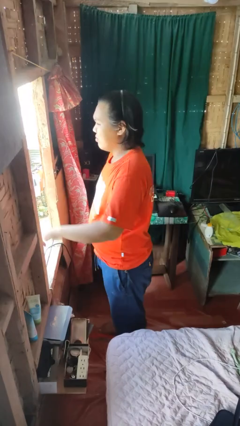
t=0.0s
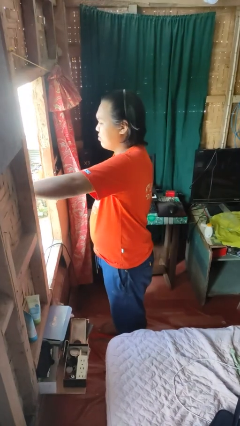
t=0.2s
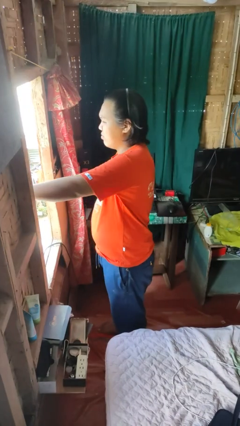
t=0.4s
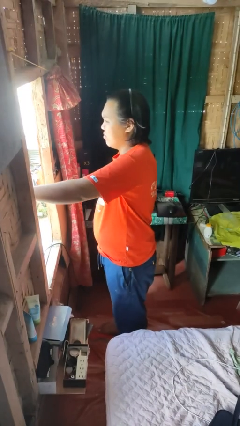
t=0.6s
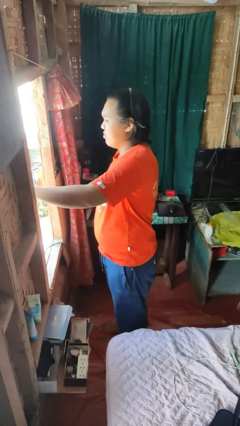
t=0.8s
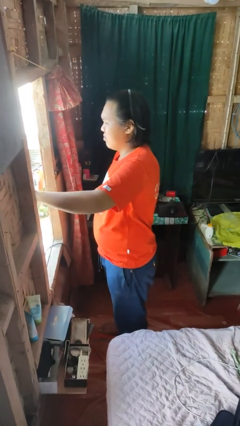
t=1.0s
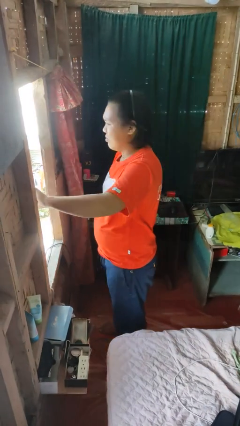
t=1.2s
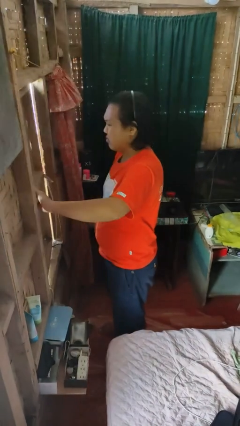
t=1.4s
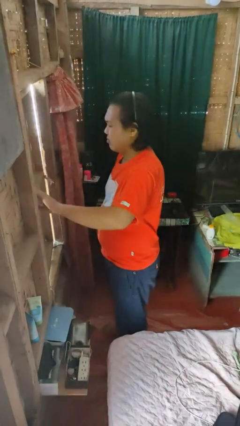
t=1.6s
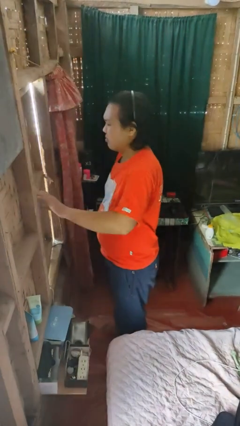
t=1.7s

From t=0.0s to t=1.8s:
person closes home window

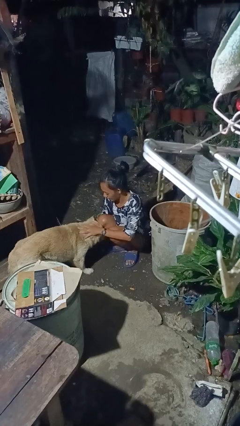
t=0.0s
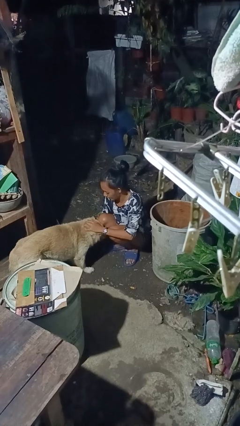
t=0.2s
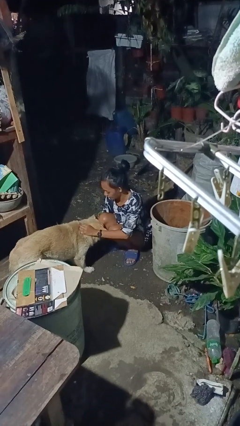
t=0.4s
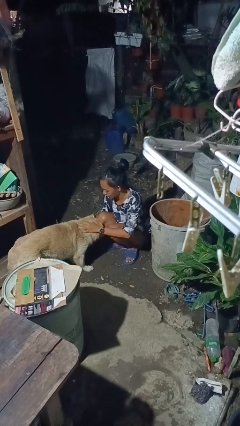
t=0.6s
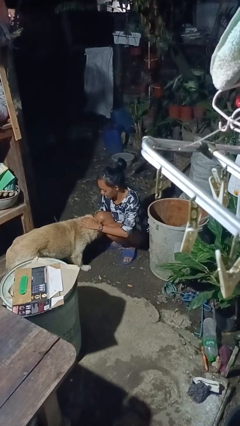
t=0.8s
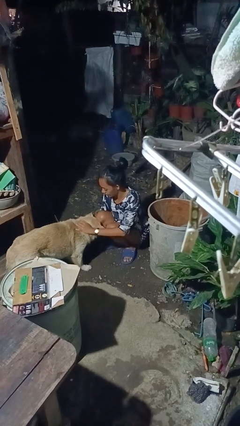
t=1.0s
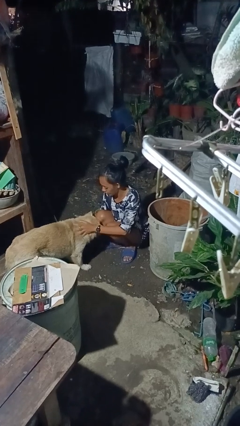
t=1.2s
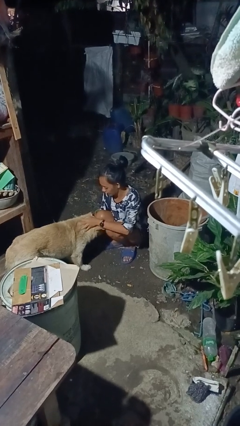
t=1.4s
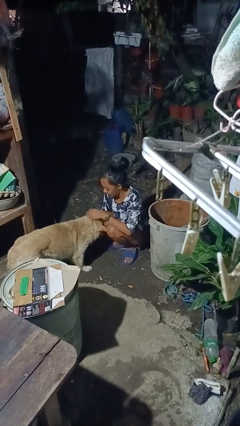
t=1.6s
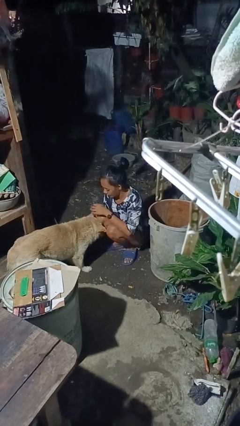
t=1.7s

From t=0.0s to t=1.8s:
person pets dog

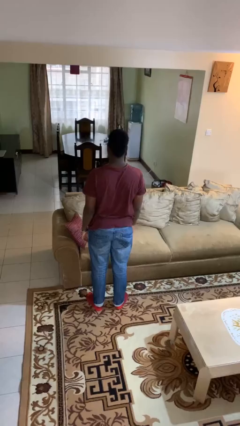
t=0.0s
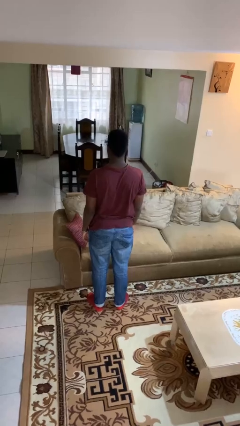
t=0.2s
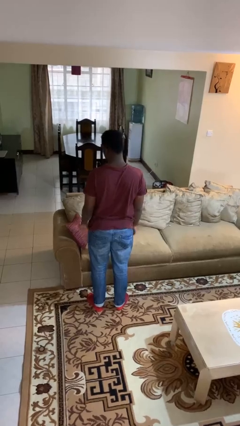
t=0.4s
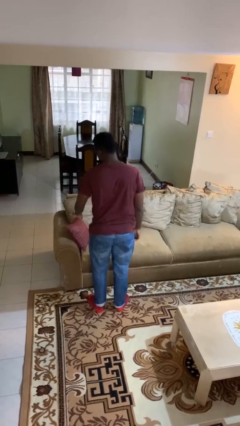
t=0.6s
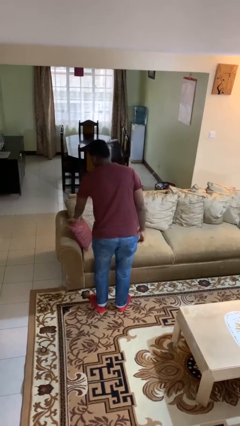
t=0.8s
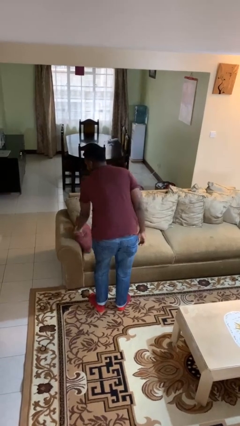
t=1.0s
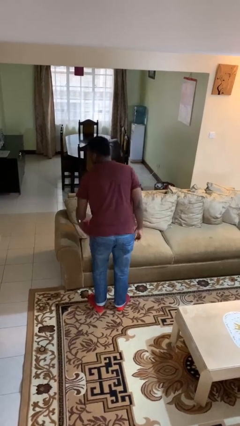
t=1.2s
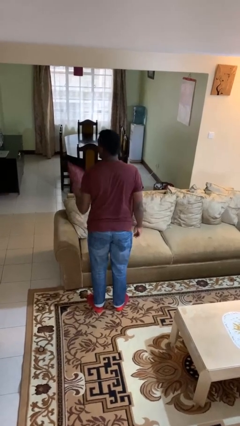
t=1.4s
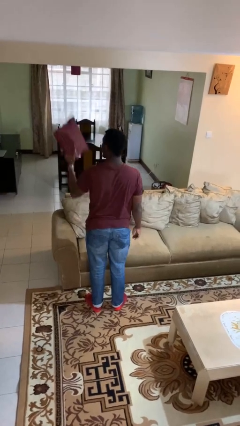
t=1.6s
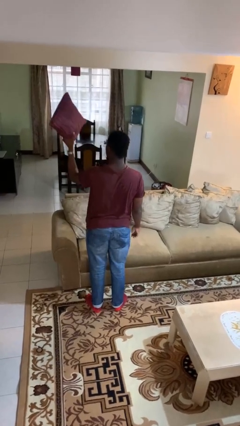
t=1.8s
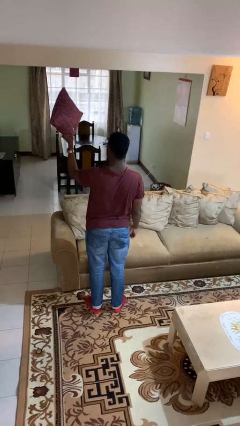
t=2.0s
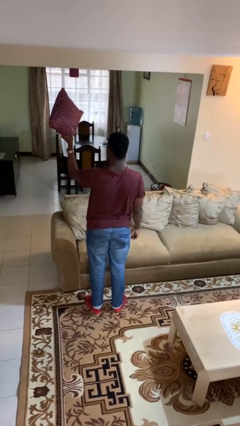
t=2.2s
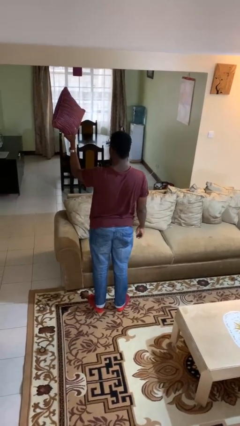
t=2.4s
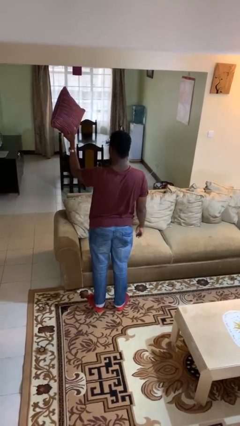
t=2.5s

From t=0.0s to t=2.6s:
person picks up object from couch

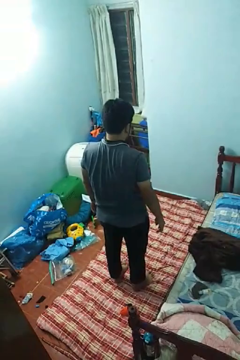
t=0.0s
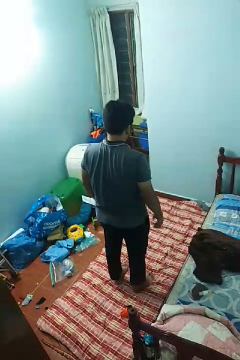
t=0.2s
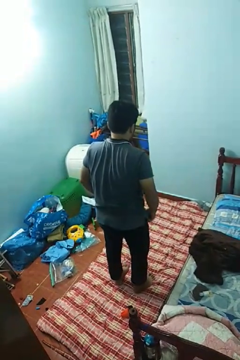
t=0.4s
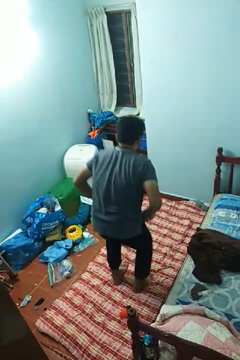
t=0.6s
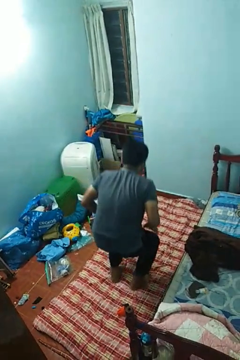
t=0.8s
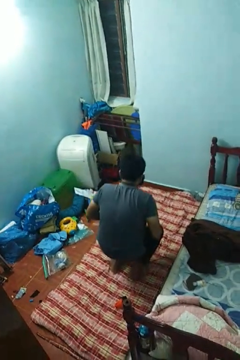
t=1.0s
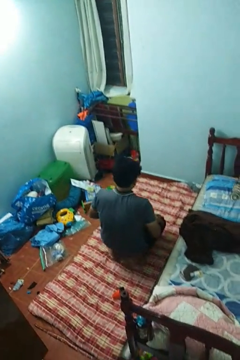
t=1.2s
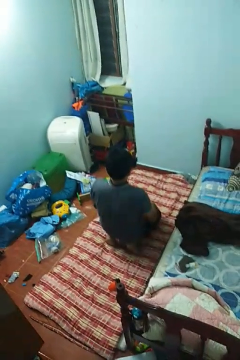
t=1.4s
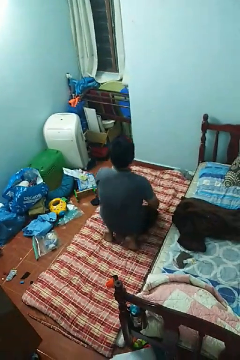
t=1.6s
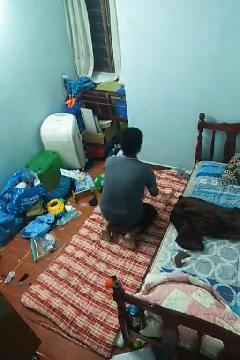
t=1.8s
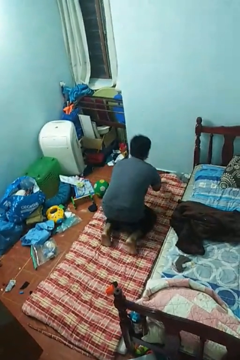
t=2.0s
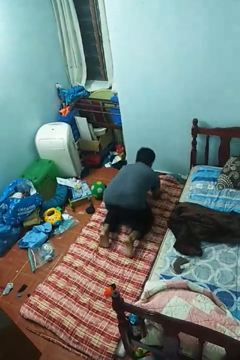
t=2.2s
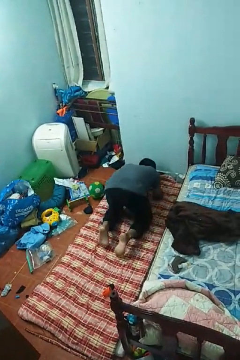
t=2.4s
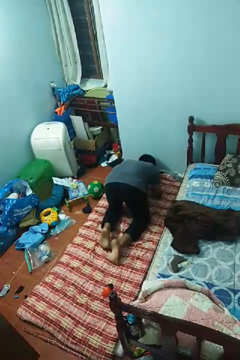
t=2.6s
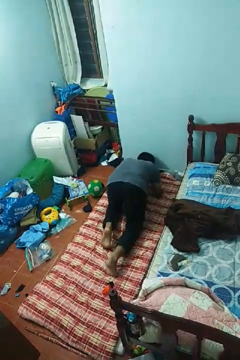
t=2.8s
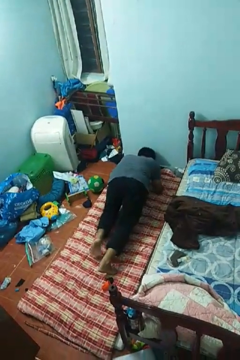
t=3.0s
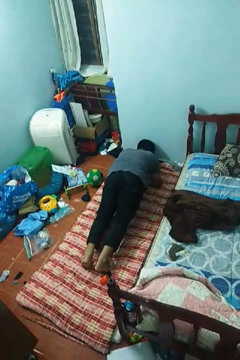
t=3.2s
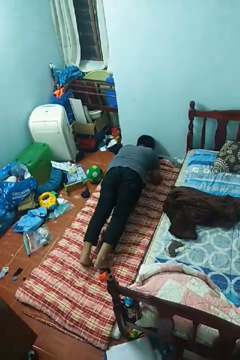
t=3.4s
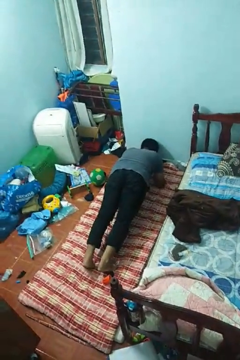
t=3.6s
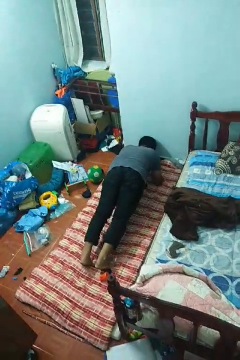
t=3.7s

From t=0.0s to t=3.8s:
person exercises with plank

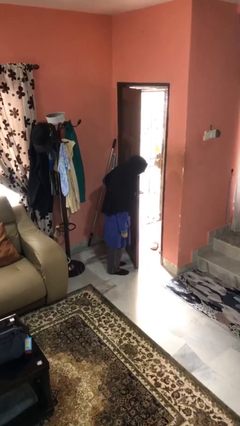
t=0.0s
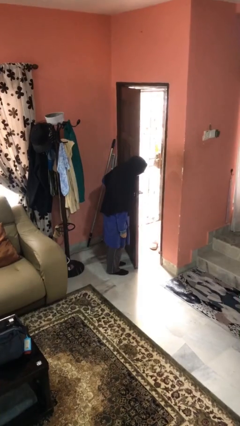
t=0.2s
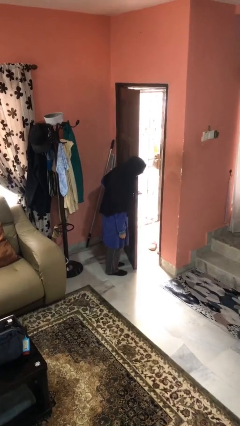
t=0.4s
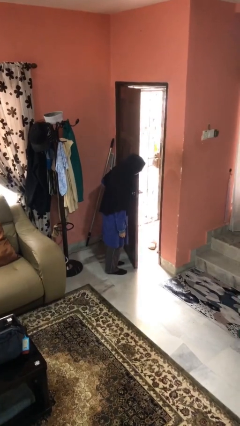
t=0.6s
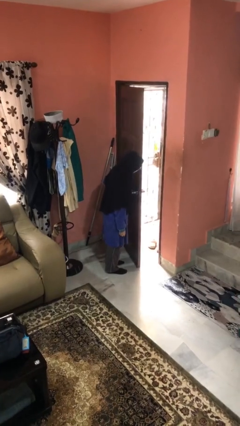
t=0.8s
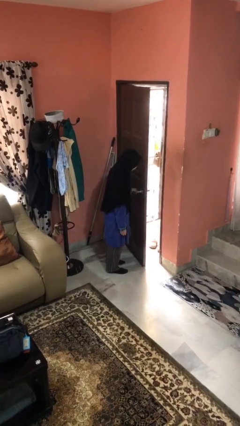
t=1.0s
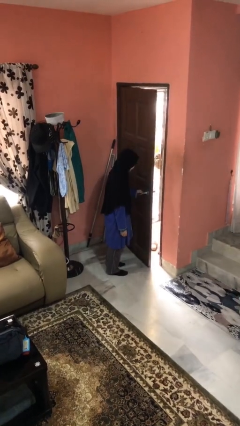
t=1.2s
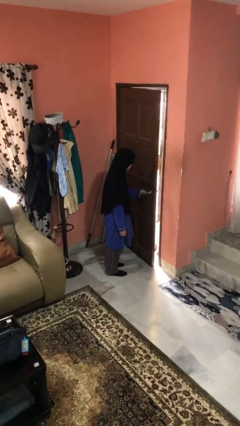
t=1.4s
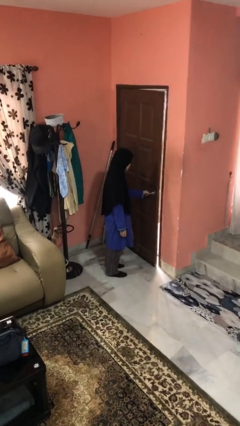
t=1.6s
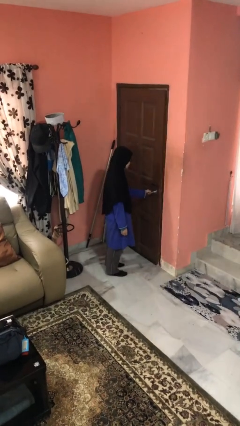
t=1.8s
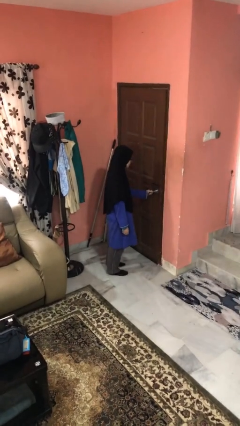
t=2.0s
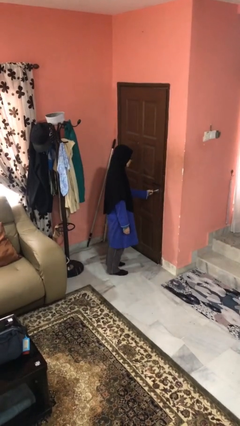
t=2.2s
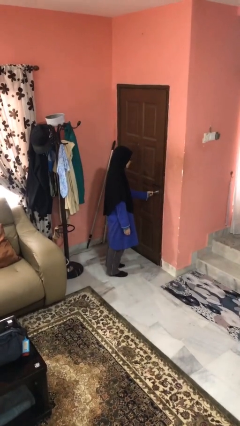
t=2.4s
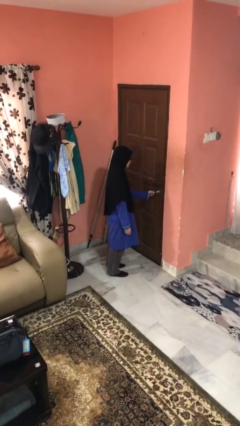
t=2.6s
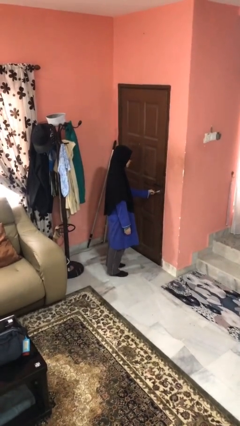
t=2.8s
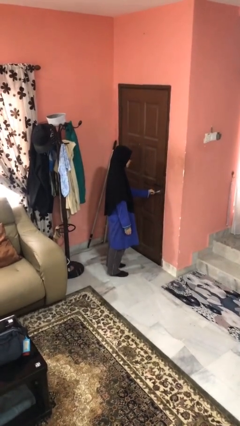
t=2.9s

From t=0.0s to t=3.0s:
person closes facility door

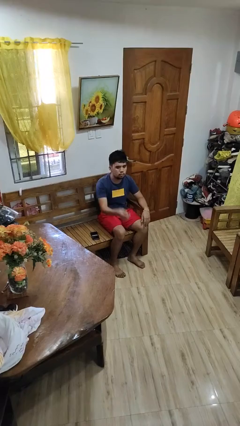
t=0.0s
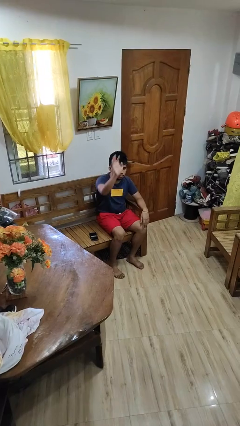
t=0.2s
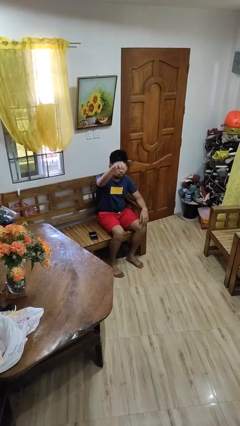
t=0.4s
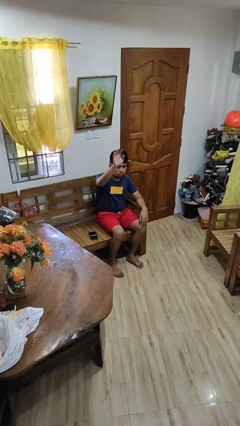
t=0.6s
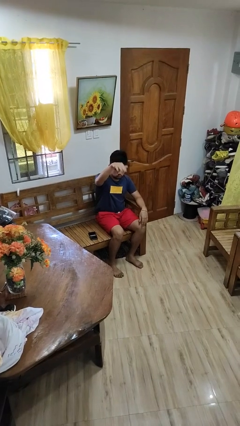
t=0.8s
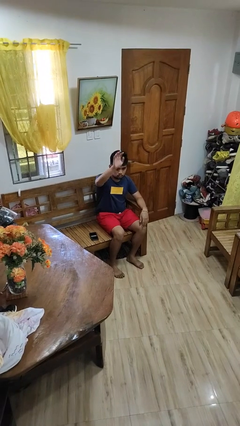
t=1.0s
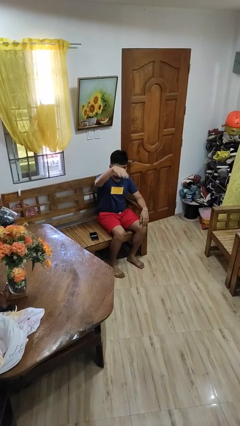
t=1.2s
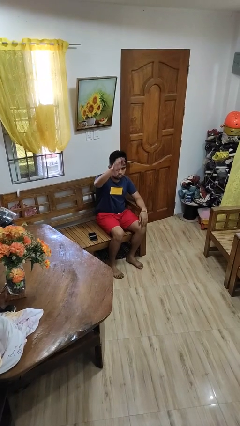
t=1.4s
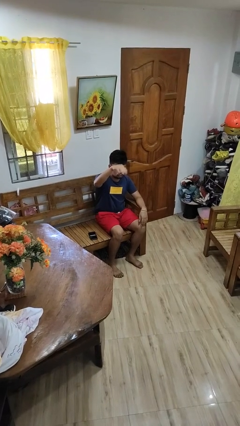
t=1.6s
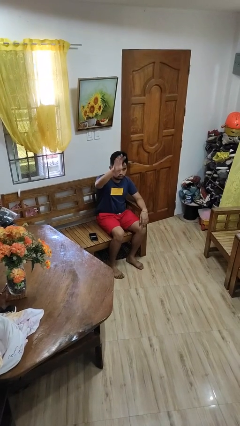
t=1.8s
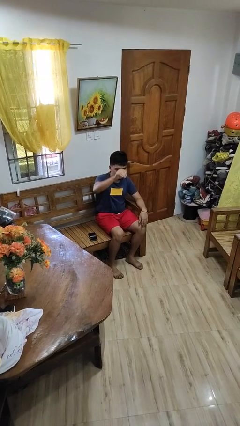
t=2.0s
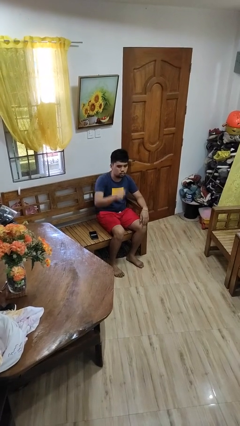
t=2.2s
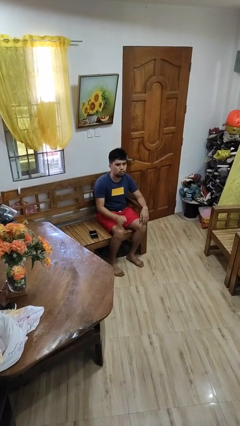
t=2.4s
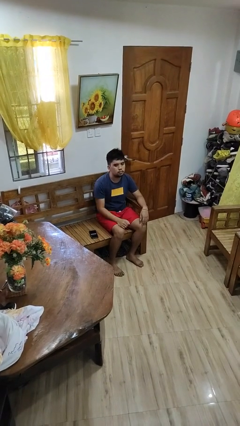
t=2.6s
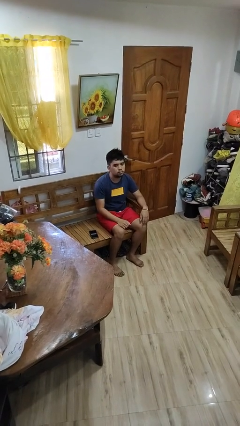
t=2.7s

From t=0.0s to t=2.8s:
person gestures come here

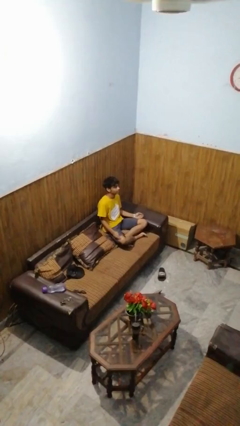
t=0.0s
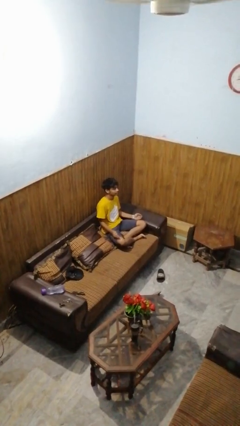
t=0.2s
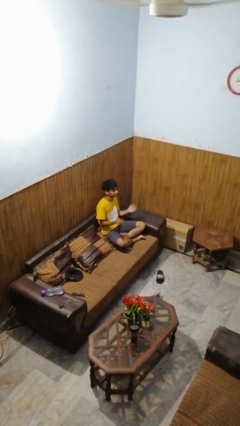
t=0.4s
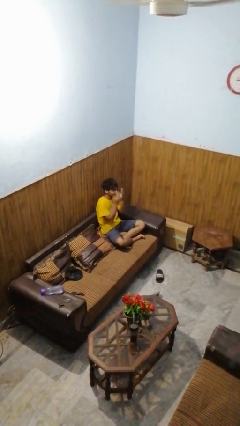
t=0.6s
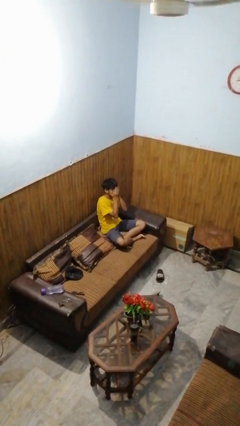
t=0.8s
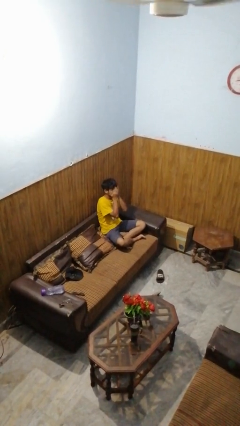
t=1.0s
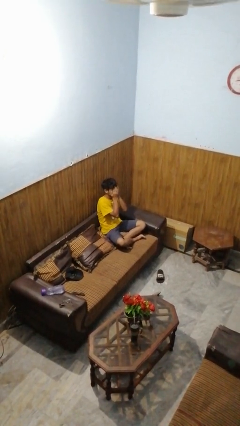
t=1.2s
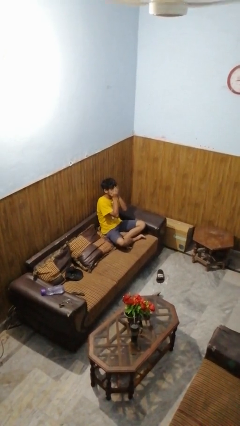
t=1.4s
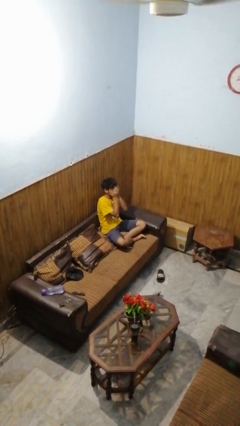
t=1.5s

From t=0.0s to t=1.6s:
person covers face with hands

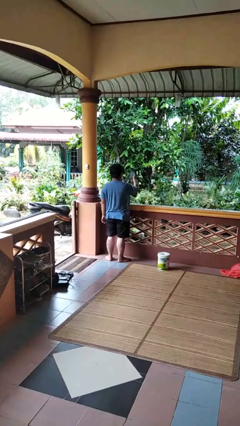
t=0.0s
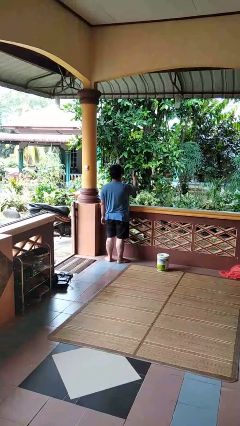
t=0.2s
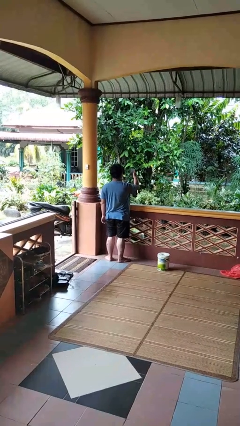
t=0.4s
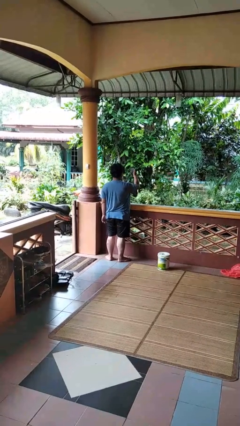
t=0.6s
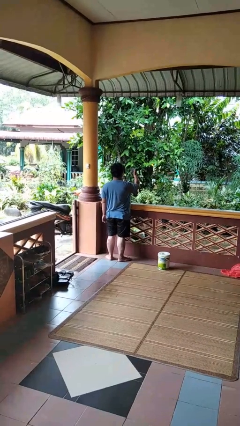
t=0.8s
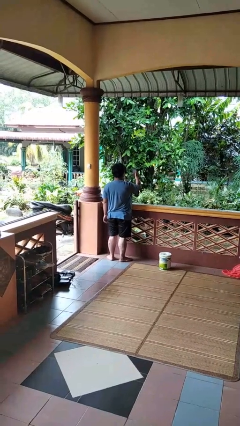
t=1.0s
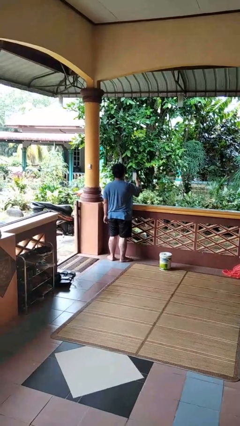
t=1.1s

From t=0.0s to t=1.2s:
person takes selfie
